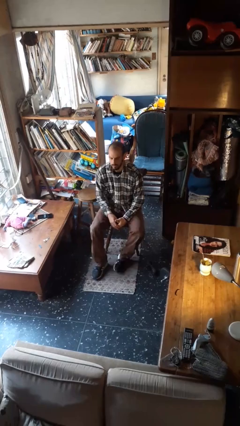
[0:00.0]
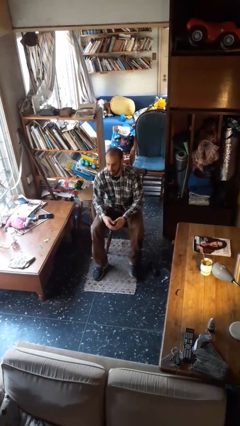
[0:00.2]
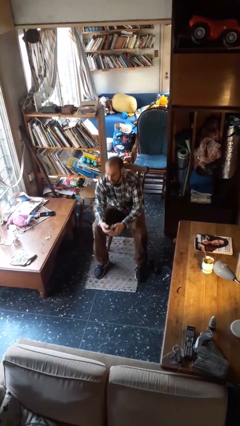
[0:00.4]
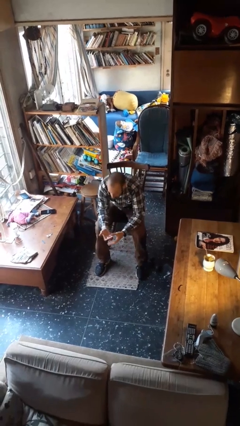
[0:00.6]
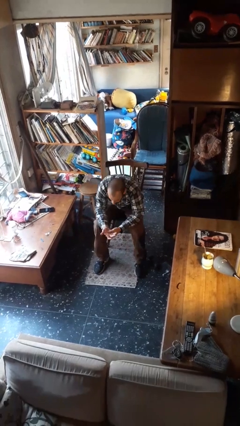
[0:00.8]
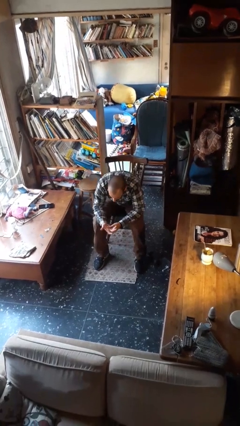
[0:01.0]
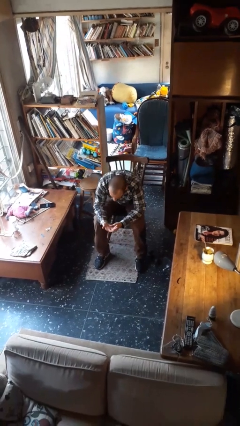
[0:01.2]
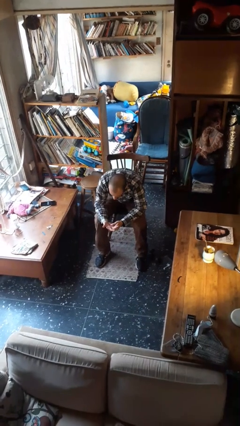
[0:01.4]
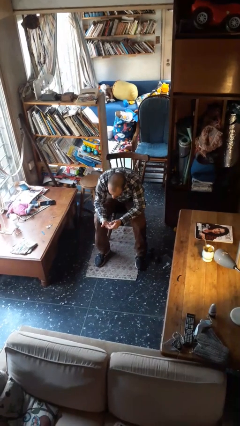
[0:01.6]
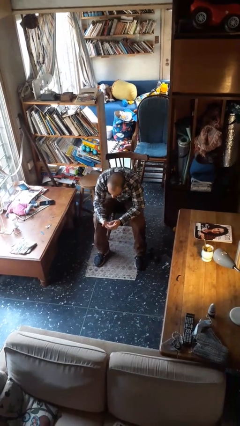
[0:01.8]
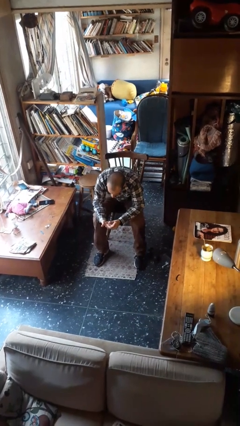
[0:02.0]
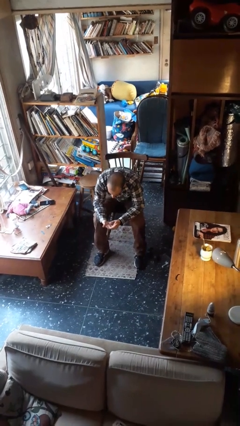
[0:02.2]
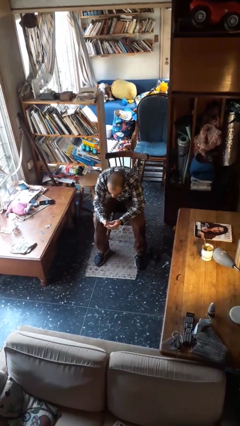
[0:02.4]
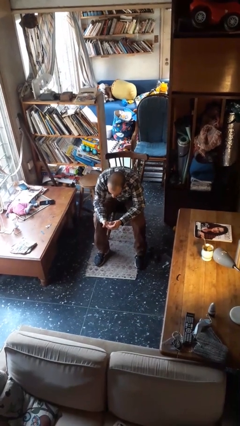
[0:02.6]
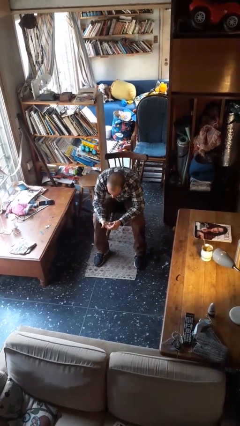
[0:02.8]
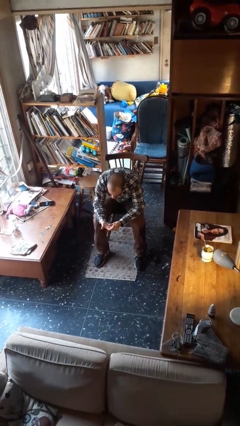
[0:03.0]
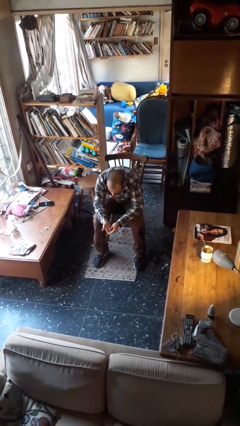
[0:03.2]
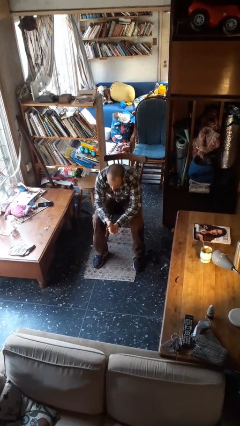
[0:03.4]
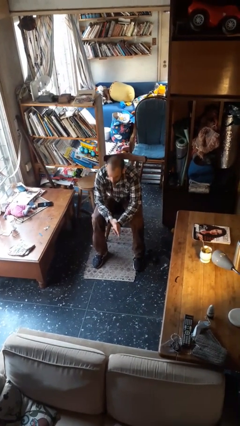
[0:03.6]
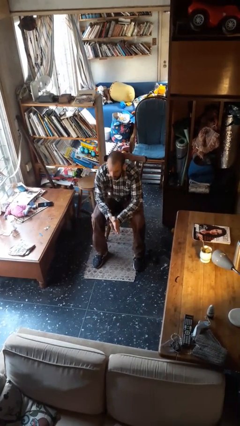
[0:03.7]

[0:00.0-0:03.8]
person looks at hands in lap

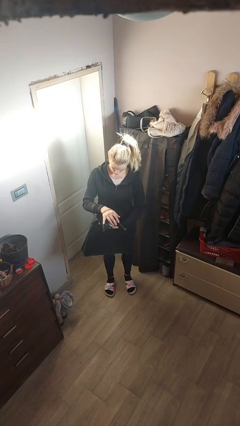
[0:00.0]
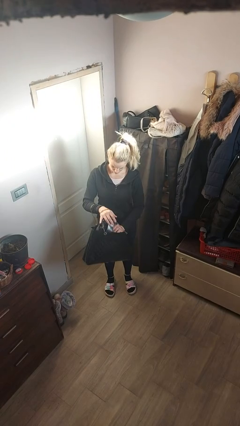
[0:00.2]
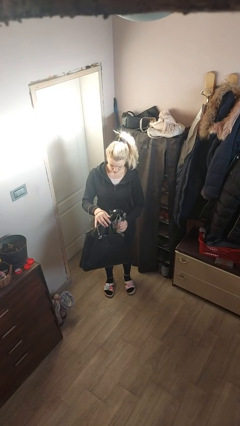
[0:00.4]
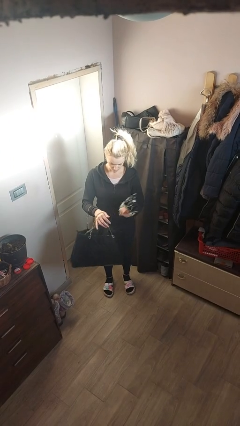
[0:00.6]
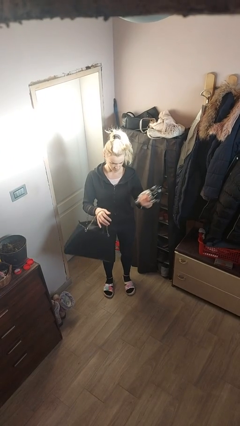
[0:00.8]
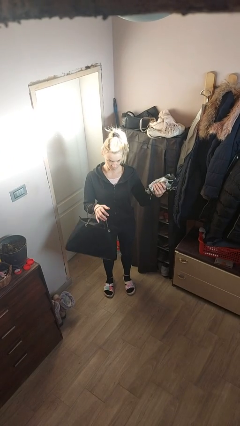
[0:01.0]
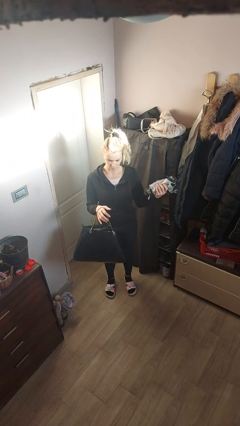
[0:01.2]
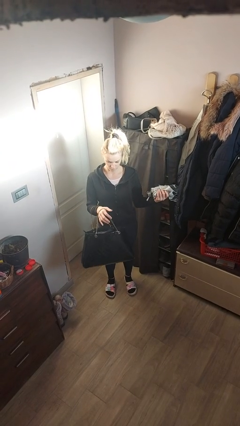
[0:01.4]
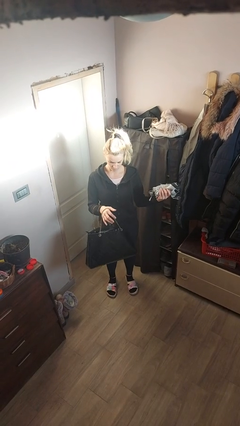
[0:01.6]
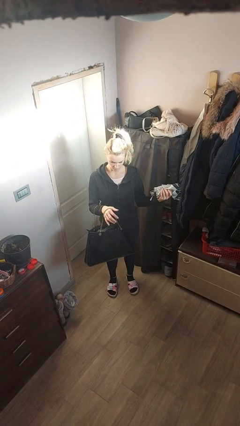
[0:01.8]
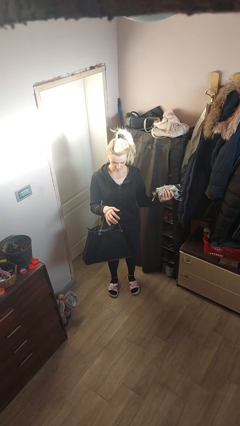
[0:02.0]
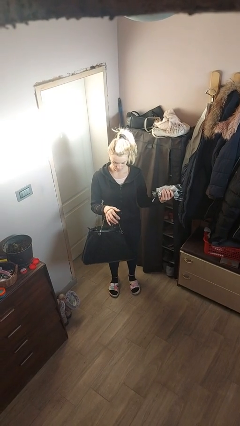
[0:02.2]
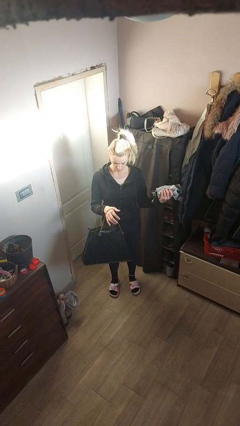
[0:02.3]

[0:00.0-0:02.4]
person takes object from purse

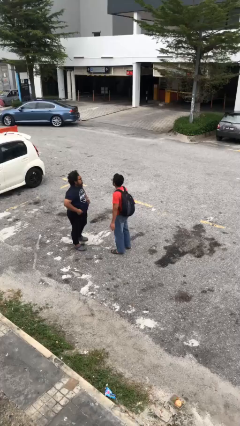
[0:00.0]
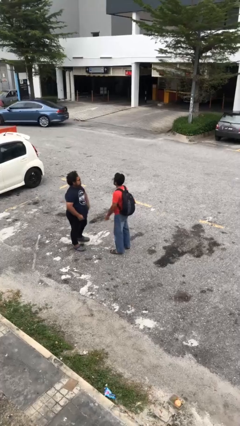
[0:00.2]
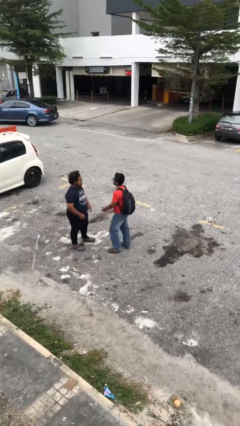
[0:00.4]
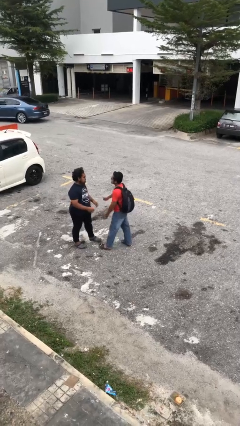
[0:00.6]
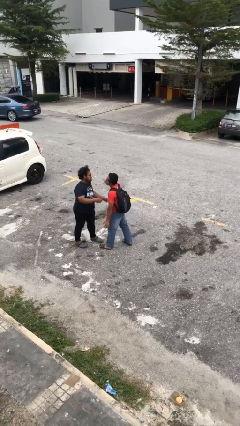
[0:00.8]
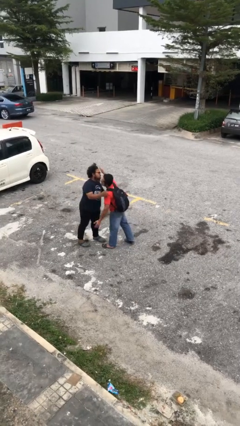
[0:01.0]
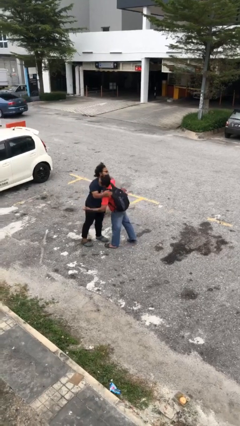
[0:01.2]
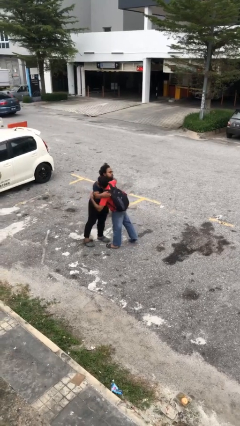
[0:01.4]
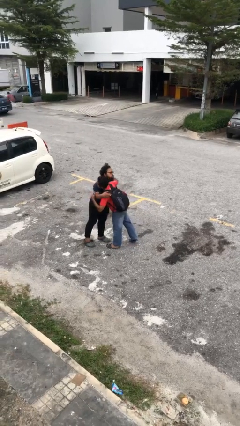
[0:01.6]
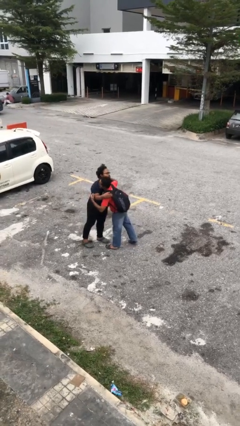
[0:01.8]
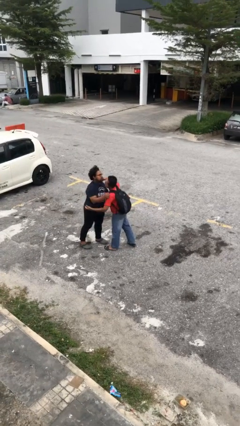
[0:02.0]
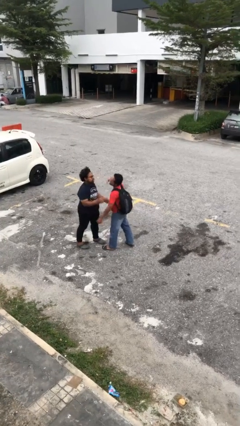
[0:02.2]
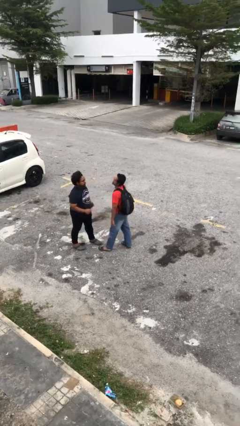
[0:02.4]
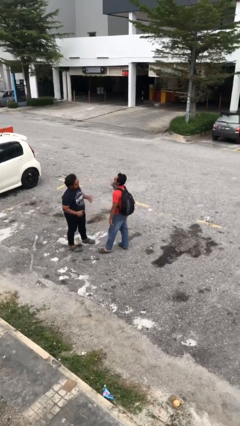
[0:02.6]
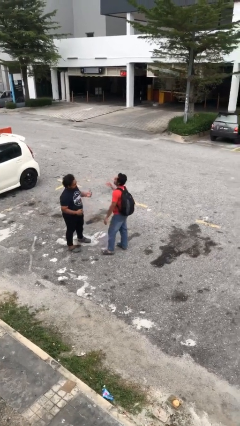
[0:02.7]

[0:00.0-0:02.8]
person embraces person

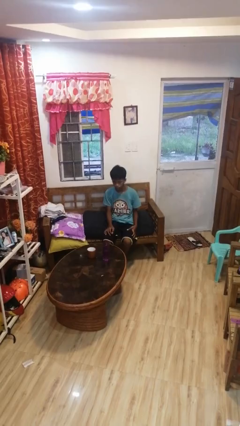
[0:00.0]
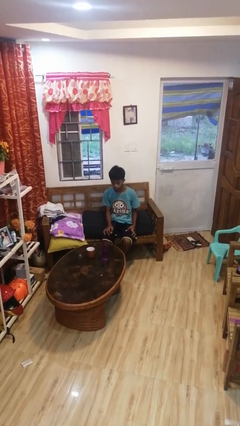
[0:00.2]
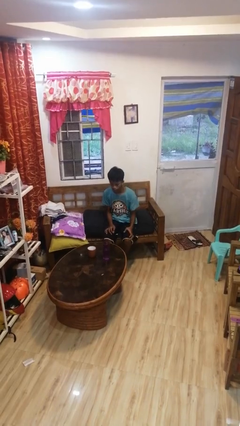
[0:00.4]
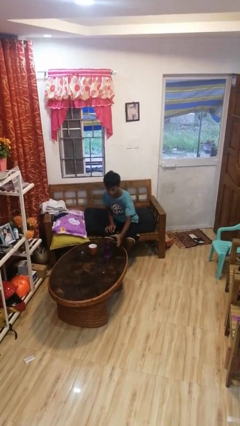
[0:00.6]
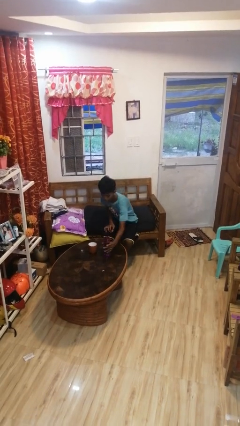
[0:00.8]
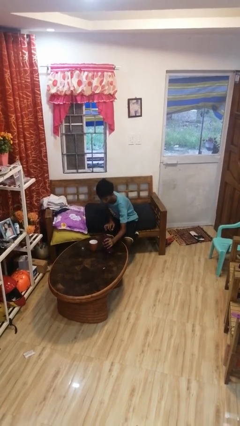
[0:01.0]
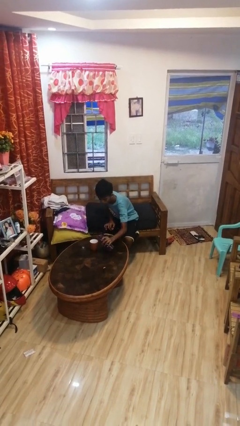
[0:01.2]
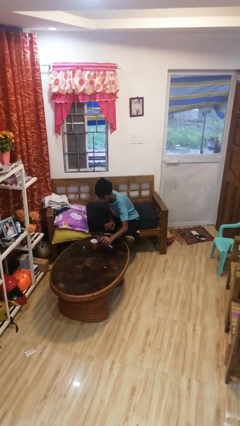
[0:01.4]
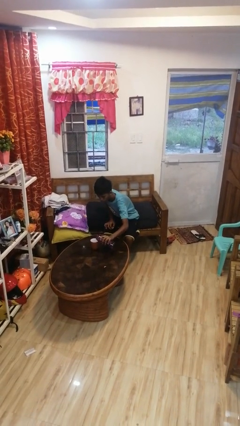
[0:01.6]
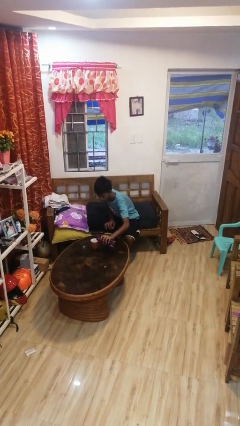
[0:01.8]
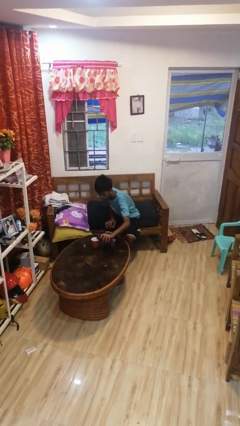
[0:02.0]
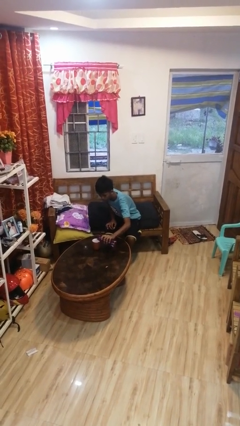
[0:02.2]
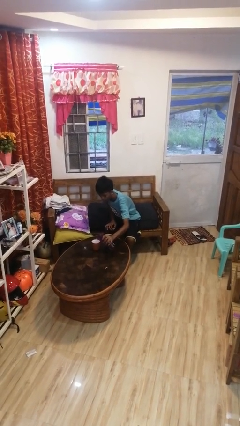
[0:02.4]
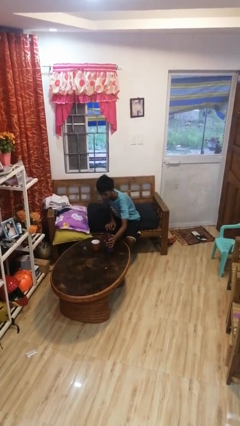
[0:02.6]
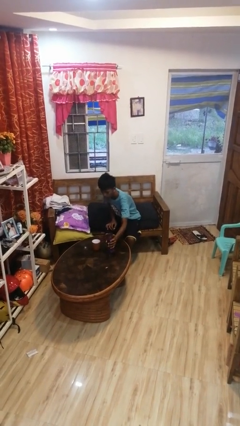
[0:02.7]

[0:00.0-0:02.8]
person pours liquid into cup

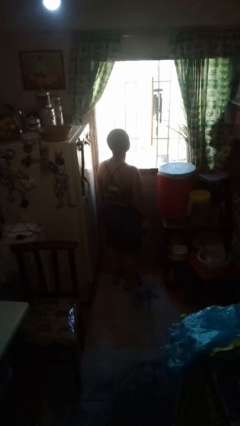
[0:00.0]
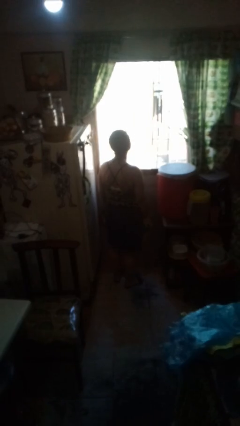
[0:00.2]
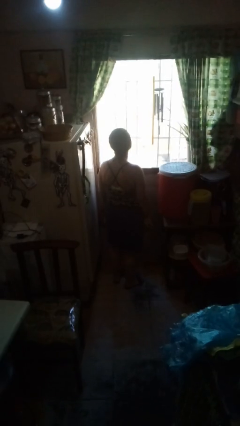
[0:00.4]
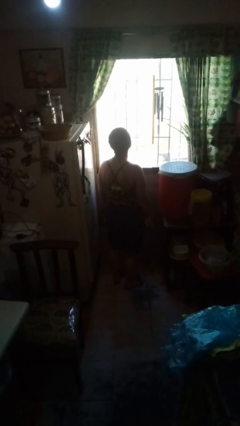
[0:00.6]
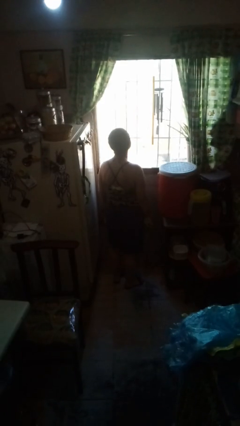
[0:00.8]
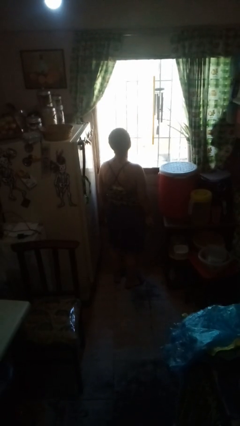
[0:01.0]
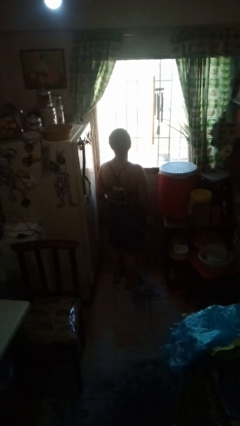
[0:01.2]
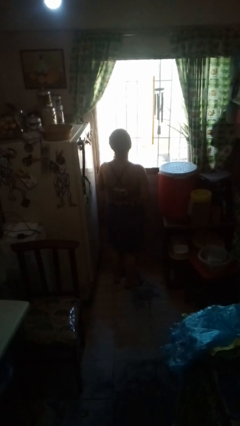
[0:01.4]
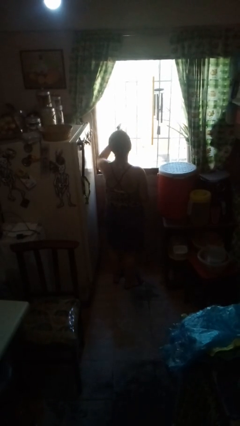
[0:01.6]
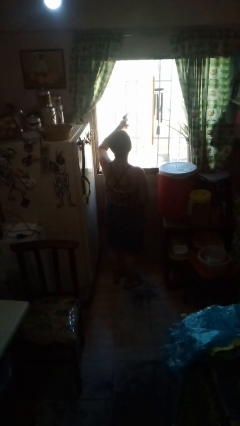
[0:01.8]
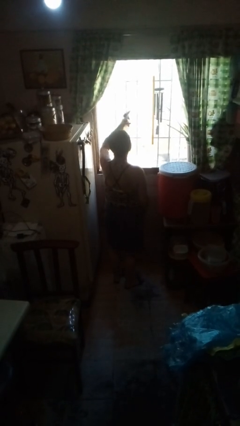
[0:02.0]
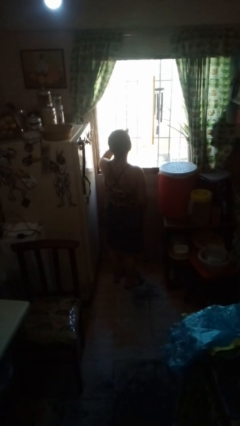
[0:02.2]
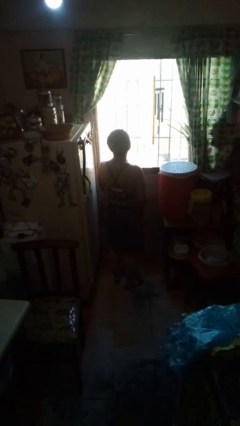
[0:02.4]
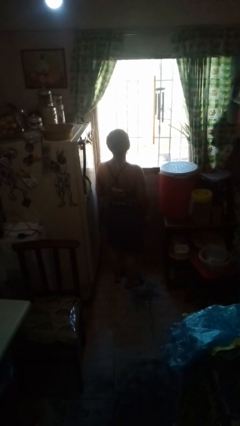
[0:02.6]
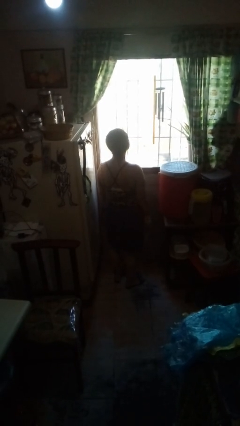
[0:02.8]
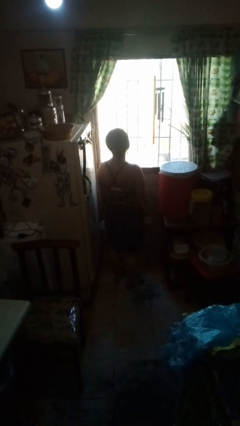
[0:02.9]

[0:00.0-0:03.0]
person sprays from bottle

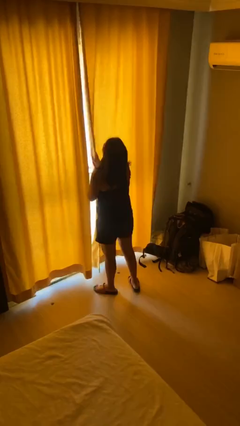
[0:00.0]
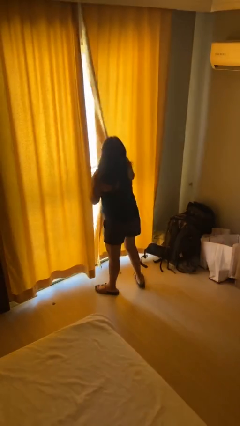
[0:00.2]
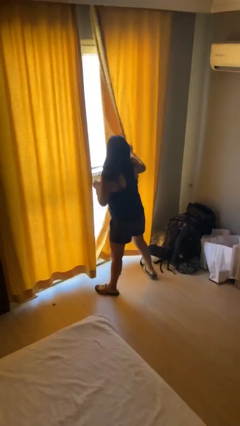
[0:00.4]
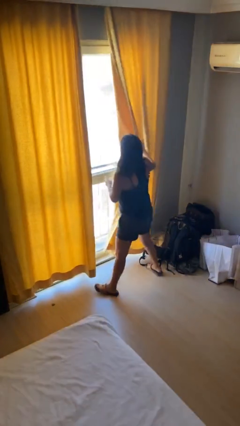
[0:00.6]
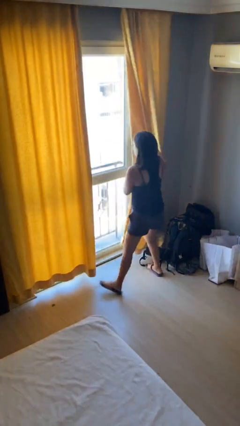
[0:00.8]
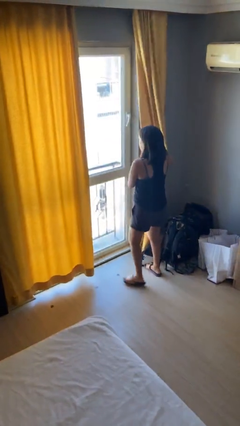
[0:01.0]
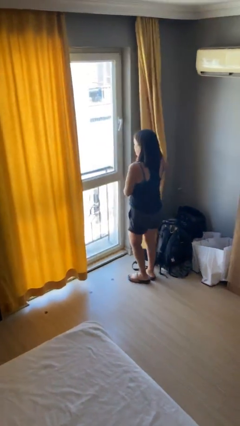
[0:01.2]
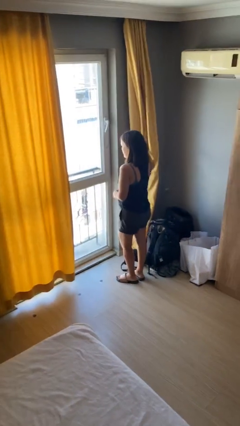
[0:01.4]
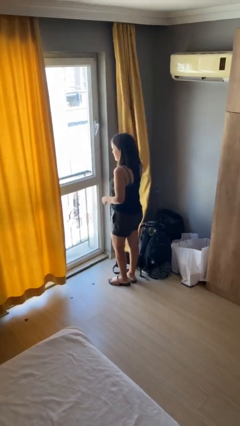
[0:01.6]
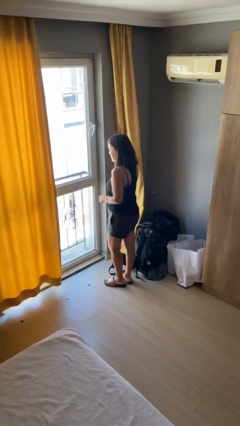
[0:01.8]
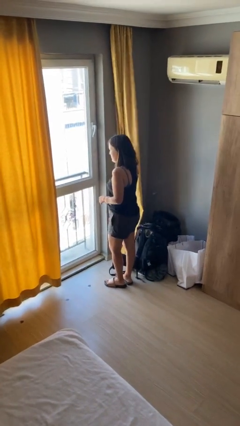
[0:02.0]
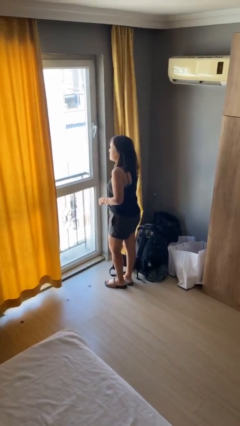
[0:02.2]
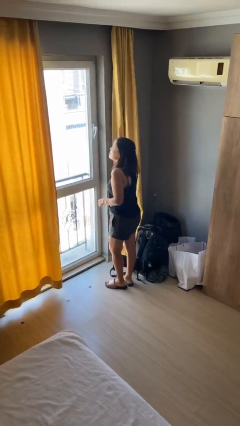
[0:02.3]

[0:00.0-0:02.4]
person opens curtains
